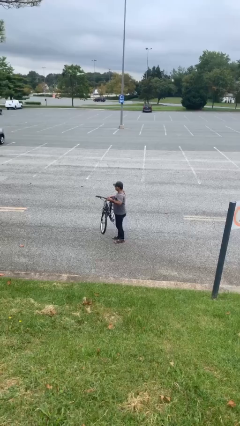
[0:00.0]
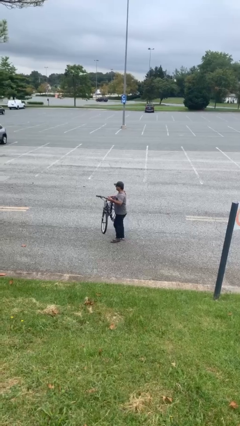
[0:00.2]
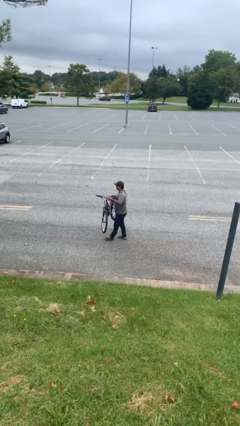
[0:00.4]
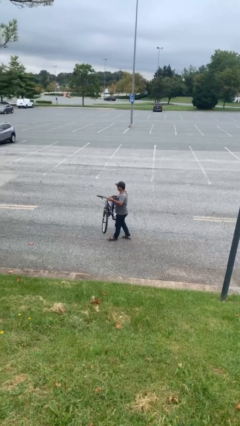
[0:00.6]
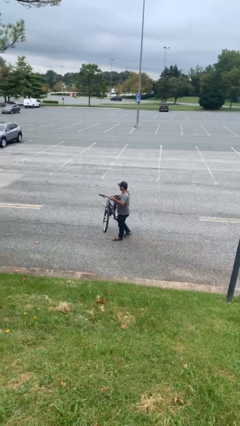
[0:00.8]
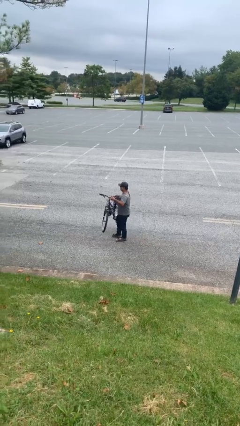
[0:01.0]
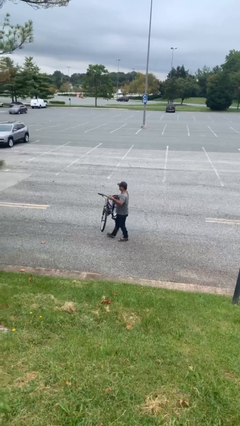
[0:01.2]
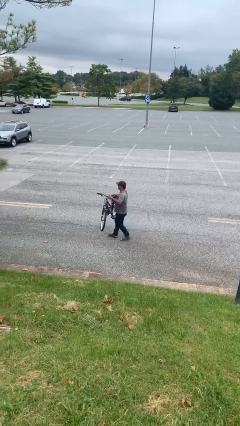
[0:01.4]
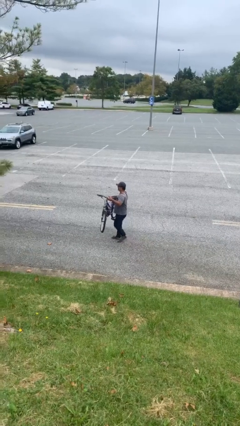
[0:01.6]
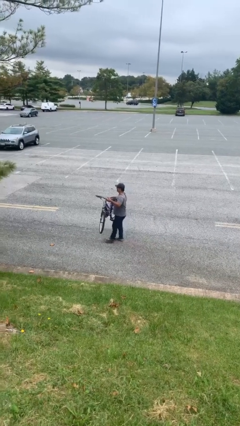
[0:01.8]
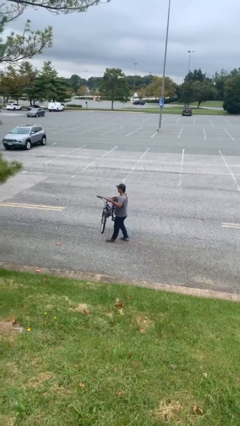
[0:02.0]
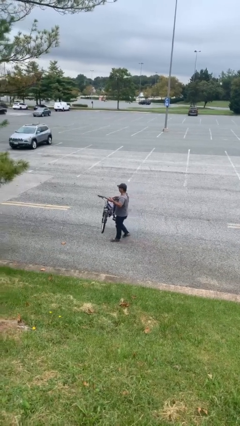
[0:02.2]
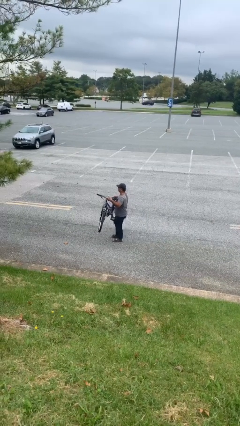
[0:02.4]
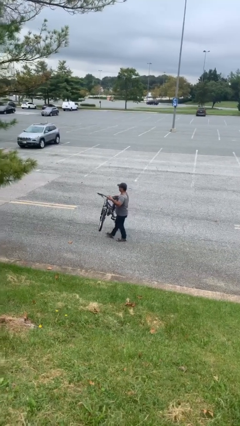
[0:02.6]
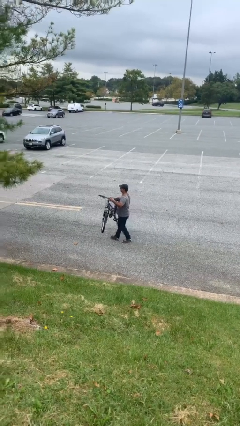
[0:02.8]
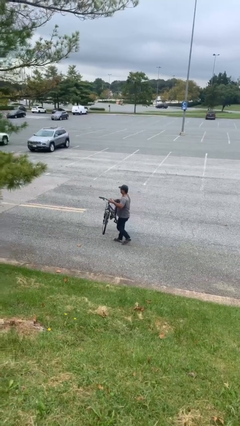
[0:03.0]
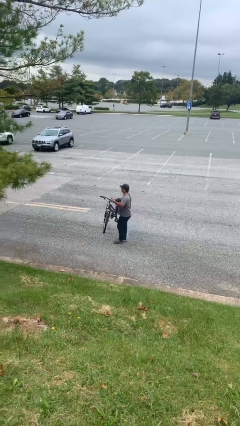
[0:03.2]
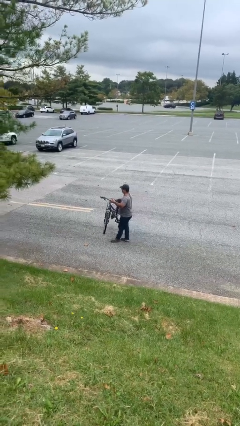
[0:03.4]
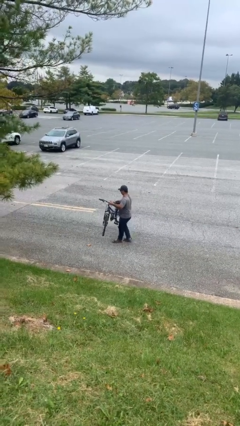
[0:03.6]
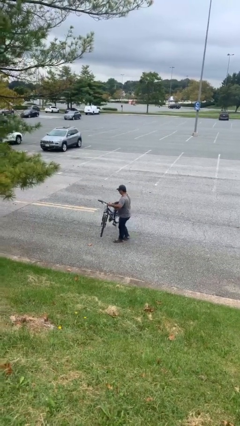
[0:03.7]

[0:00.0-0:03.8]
person carries heavy object

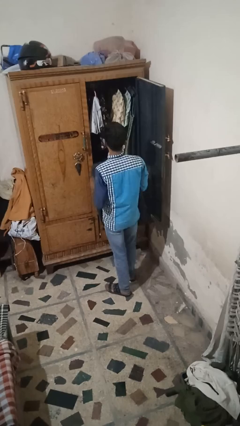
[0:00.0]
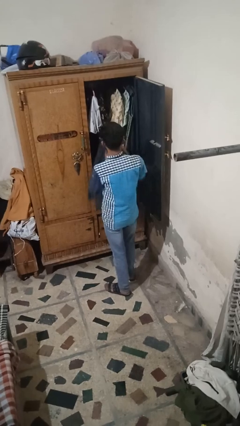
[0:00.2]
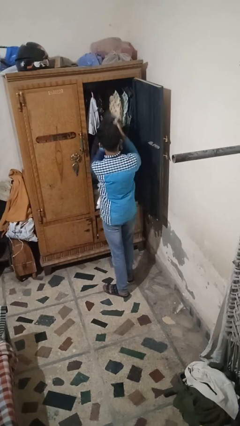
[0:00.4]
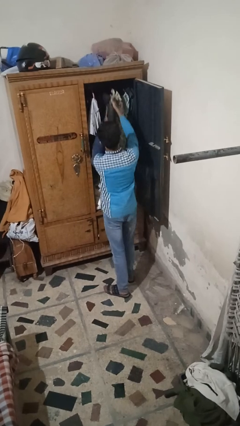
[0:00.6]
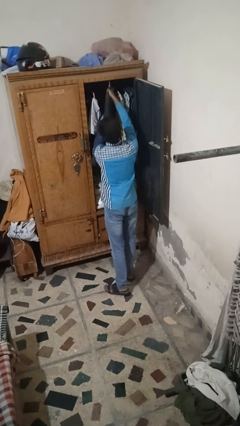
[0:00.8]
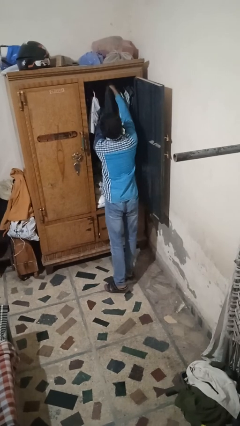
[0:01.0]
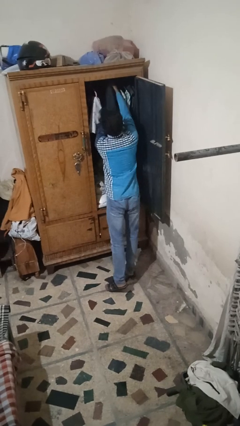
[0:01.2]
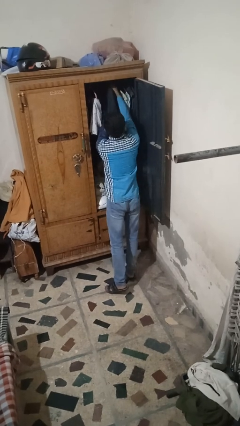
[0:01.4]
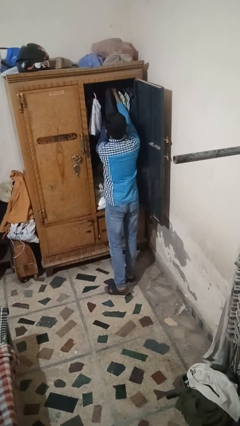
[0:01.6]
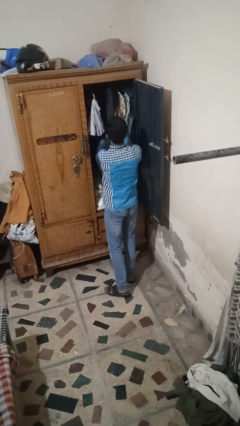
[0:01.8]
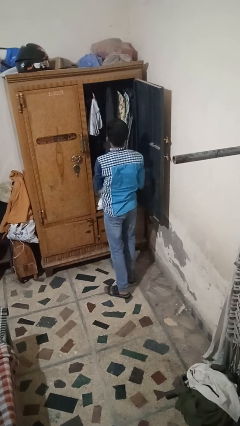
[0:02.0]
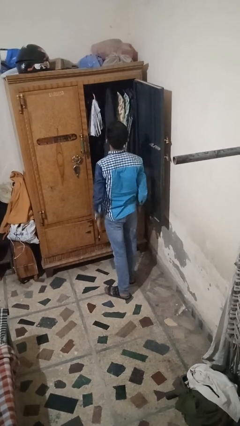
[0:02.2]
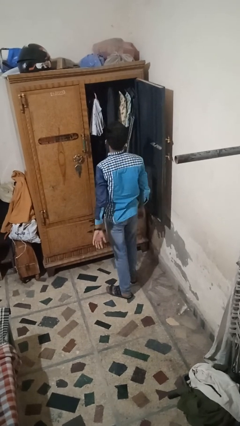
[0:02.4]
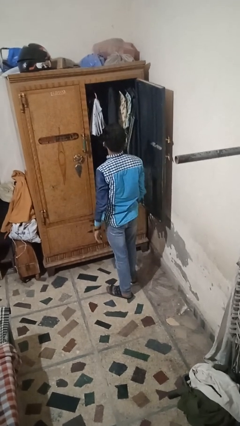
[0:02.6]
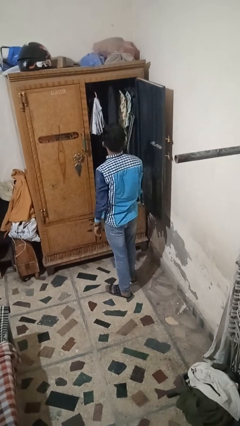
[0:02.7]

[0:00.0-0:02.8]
person puts clothes into closet

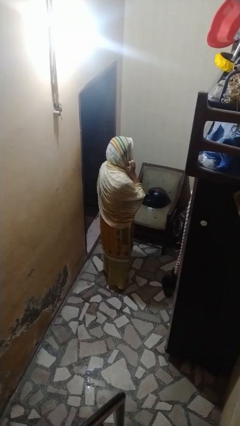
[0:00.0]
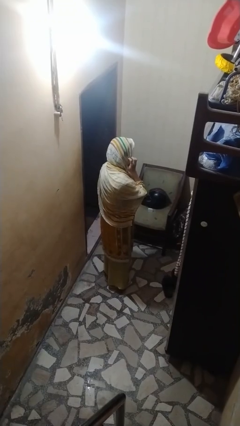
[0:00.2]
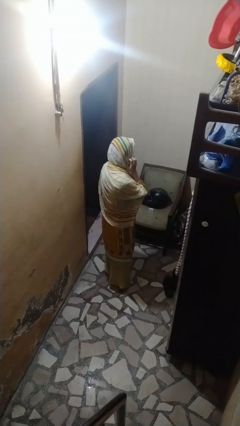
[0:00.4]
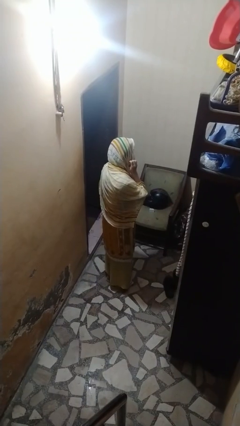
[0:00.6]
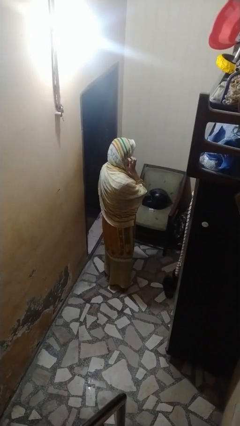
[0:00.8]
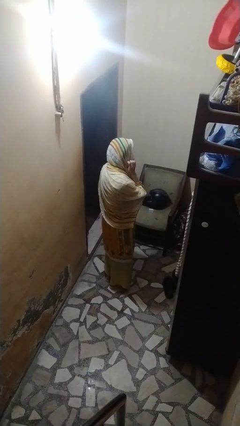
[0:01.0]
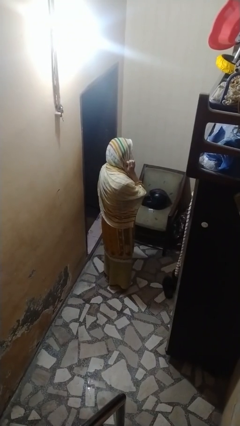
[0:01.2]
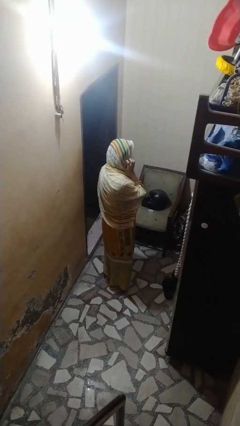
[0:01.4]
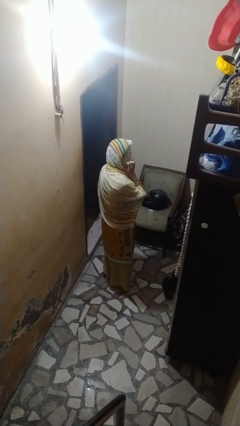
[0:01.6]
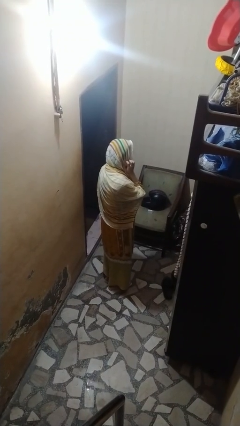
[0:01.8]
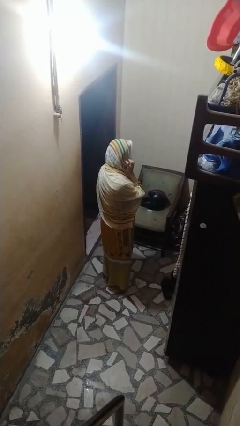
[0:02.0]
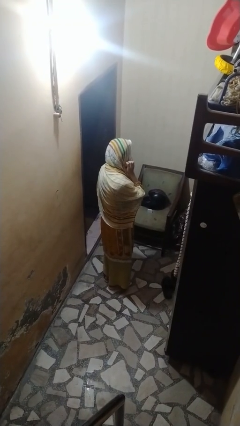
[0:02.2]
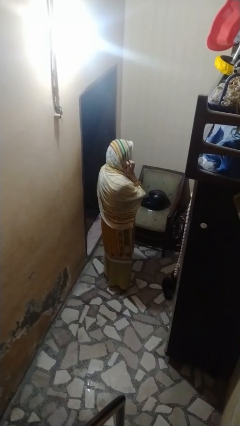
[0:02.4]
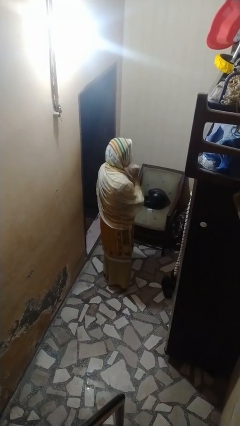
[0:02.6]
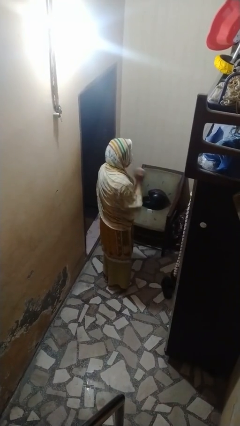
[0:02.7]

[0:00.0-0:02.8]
person scratches face

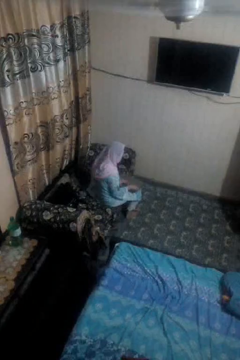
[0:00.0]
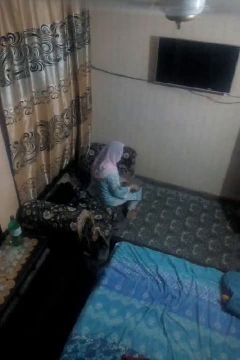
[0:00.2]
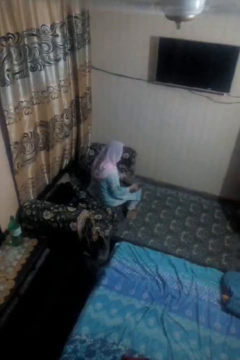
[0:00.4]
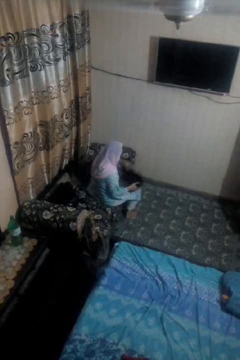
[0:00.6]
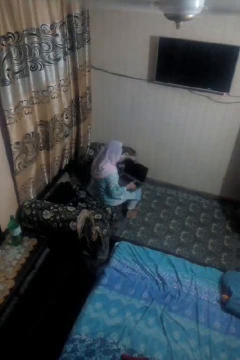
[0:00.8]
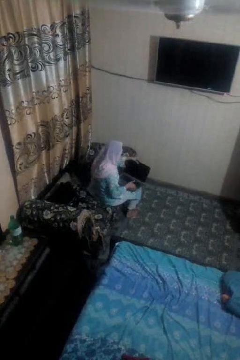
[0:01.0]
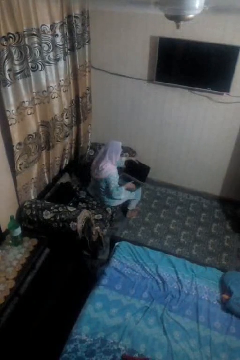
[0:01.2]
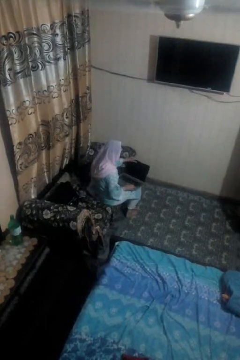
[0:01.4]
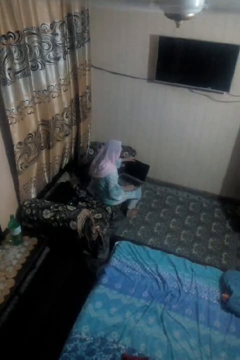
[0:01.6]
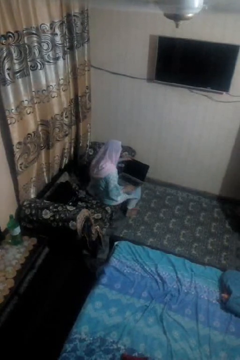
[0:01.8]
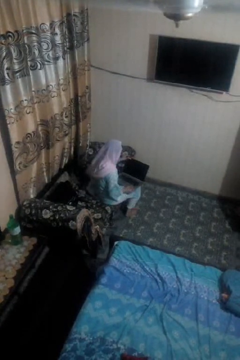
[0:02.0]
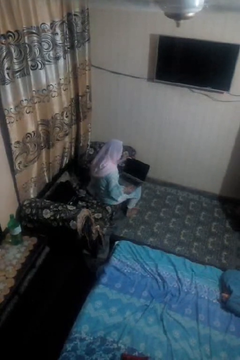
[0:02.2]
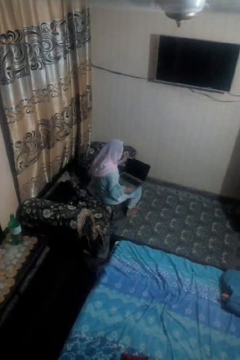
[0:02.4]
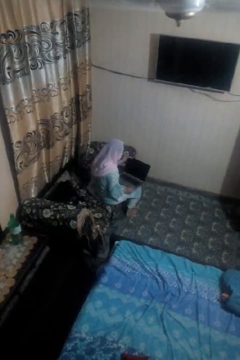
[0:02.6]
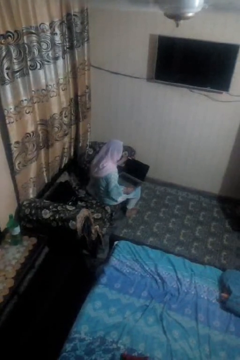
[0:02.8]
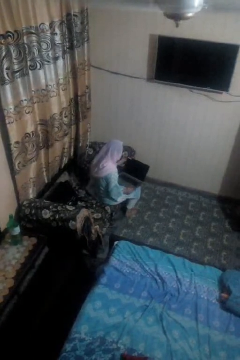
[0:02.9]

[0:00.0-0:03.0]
person opens laptop

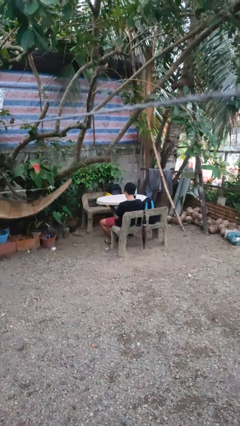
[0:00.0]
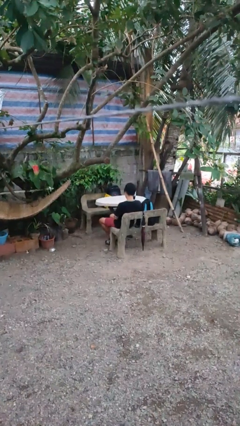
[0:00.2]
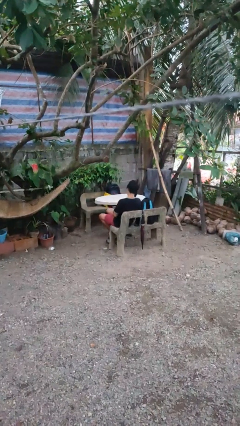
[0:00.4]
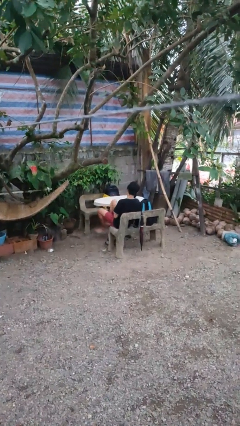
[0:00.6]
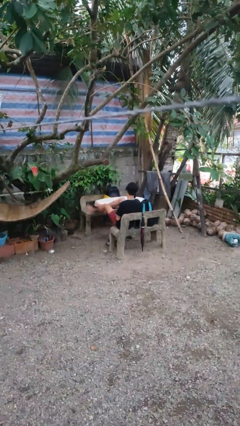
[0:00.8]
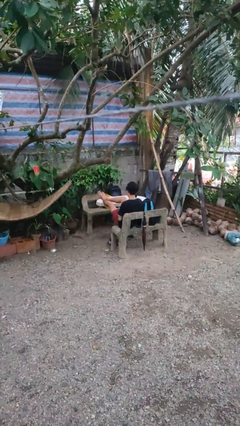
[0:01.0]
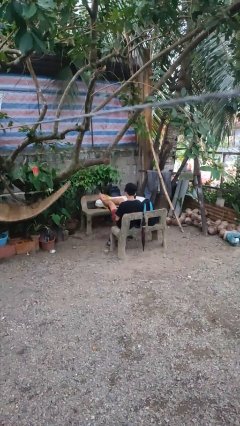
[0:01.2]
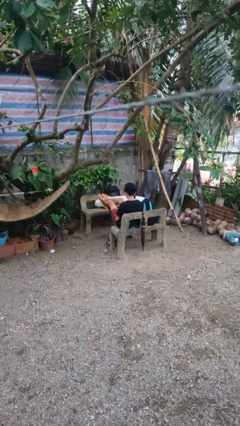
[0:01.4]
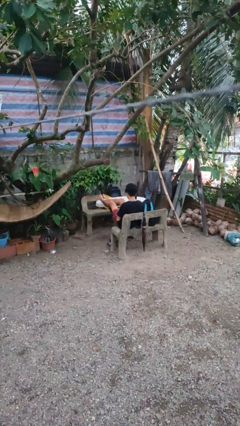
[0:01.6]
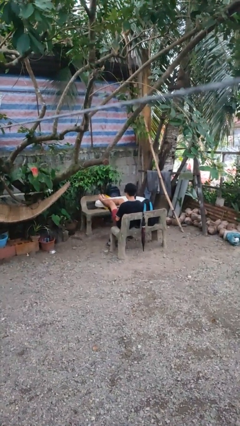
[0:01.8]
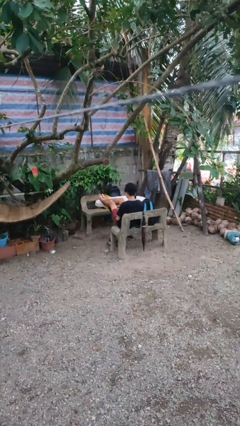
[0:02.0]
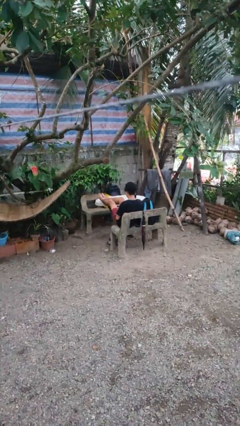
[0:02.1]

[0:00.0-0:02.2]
person puts feet up

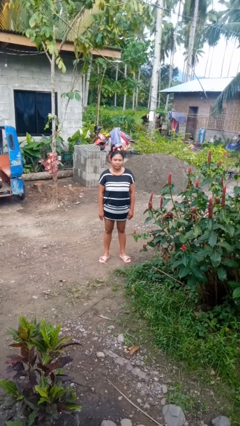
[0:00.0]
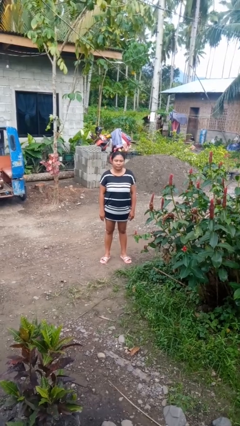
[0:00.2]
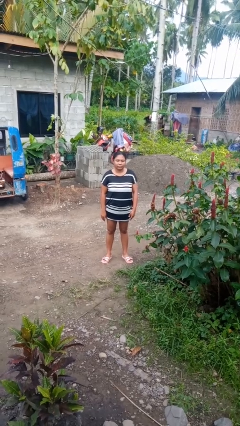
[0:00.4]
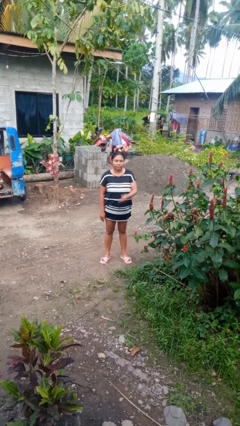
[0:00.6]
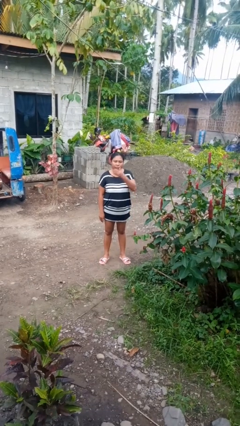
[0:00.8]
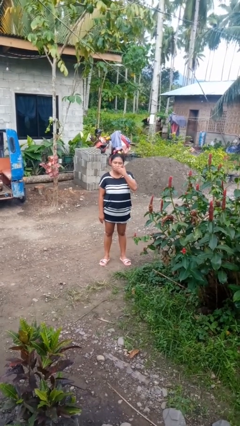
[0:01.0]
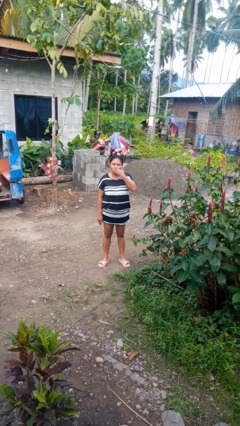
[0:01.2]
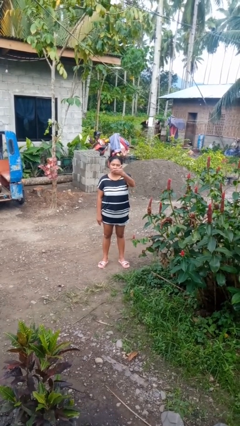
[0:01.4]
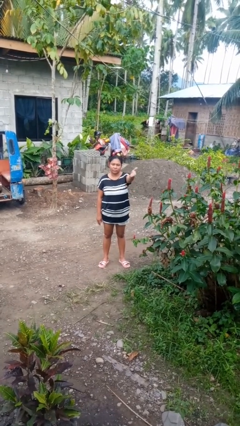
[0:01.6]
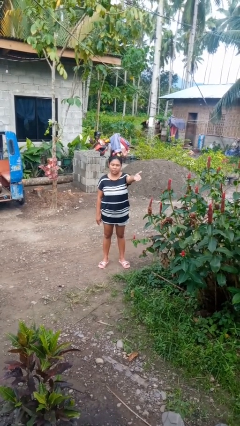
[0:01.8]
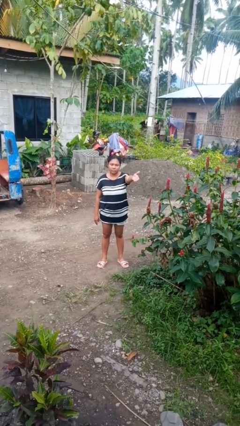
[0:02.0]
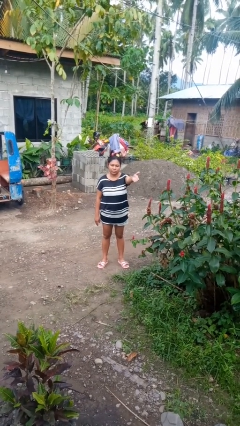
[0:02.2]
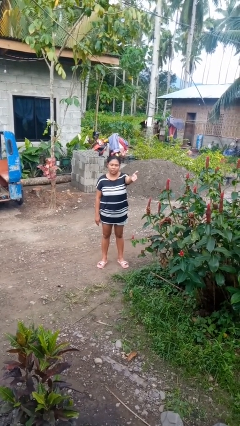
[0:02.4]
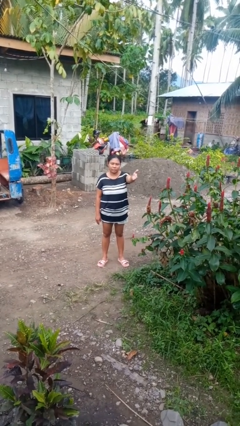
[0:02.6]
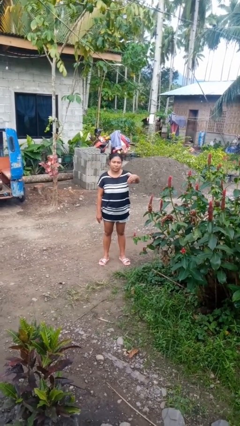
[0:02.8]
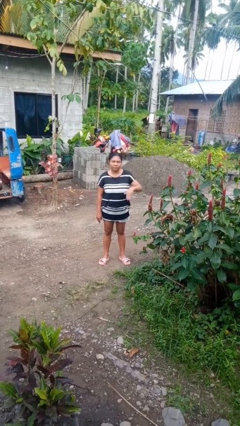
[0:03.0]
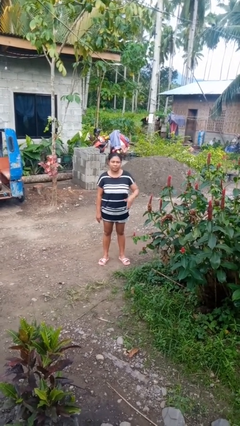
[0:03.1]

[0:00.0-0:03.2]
person gestures blow kiss
